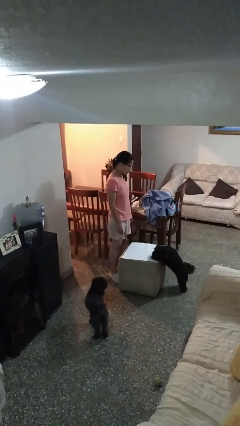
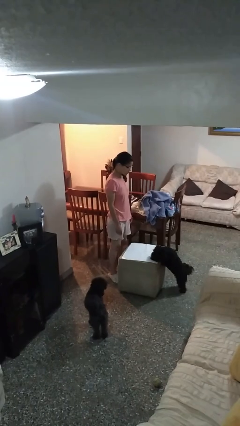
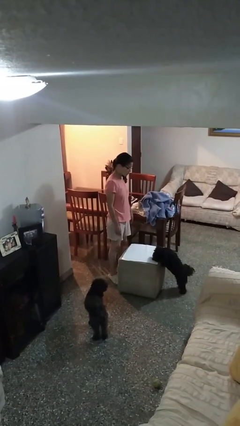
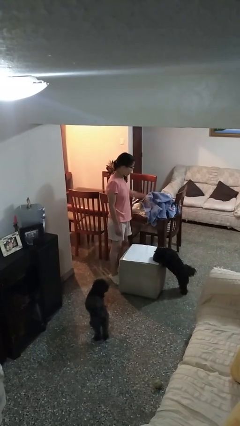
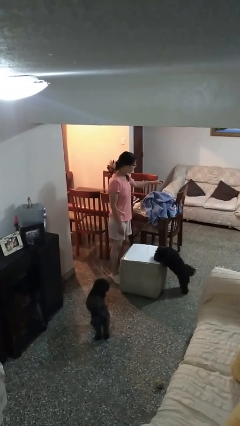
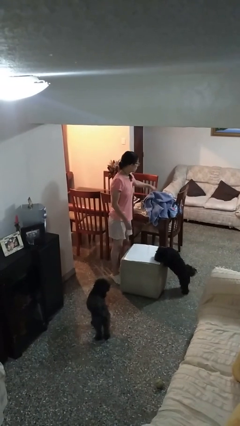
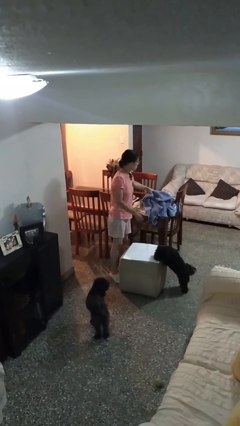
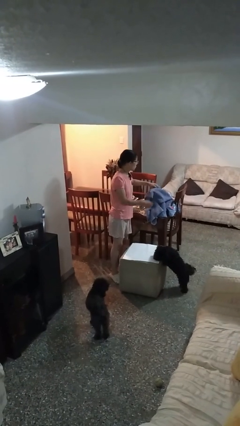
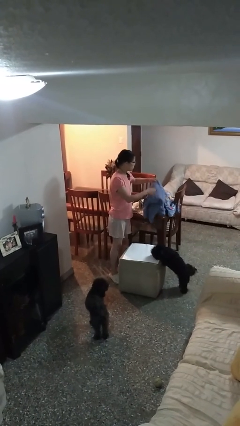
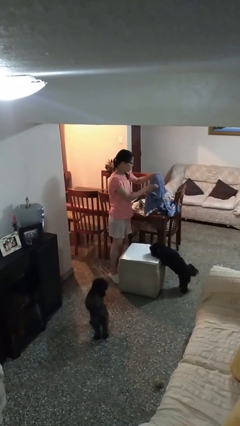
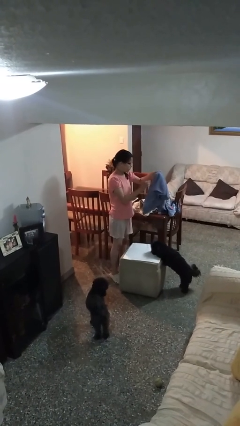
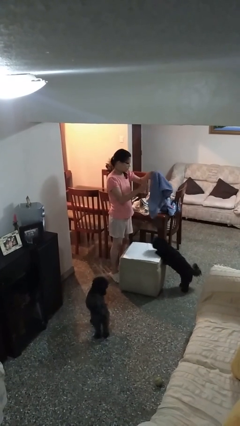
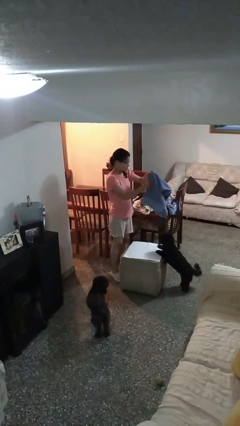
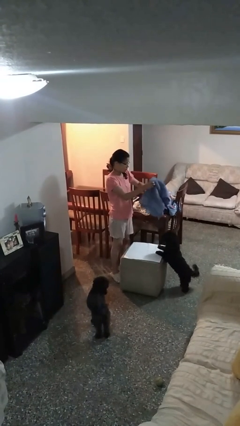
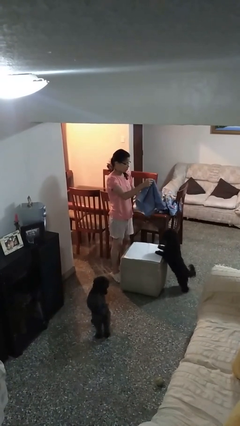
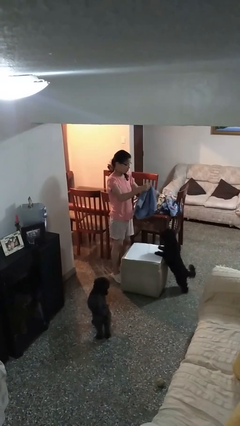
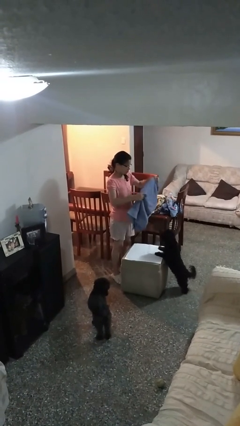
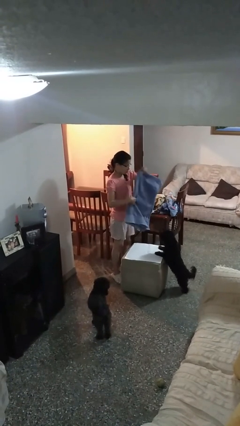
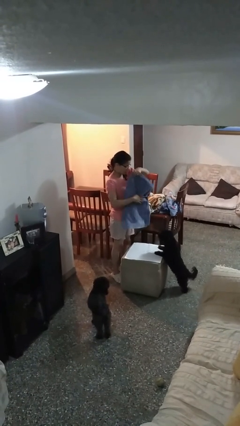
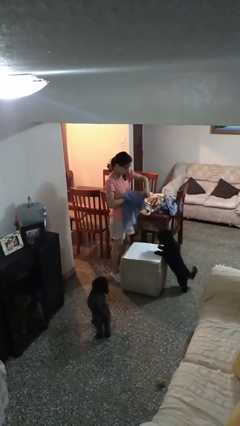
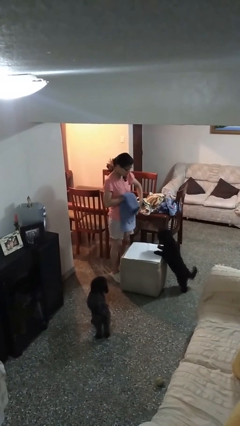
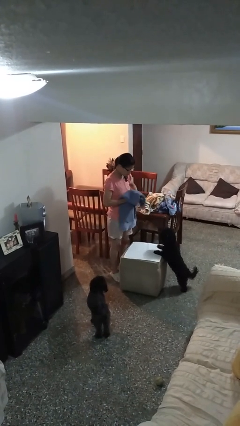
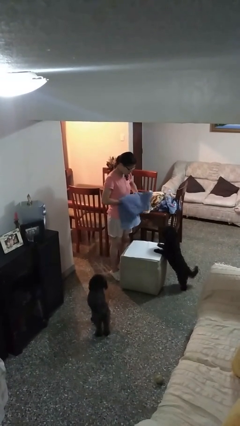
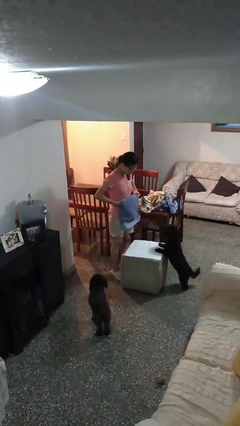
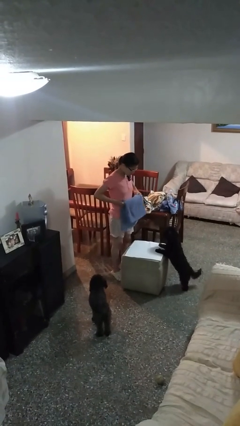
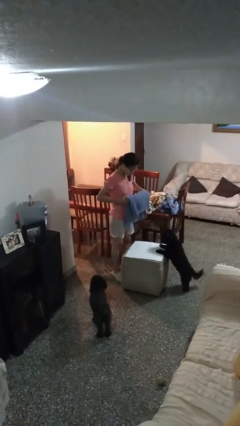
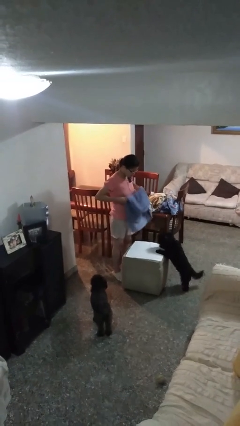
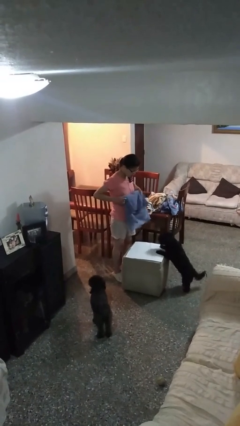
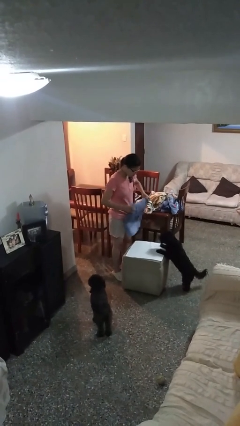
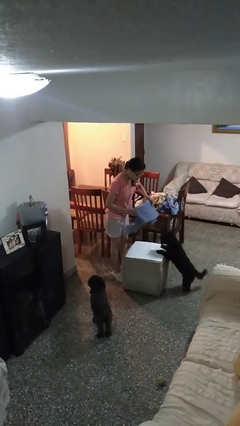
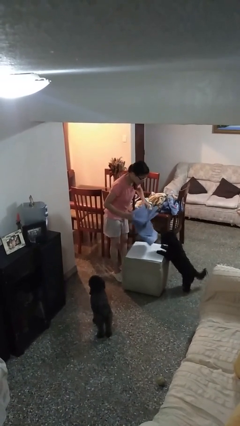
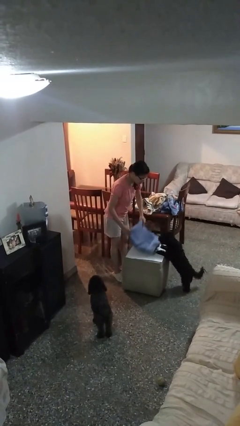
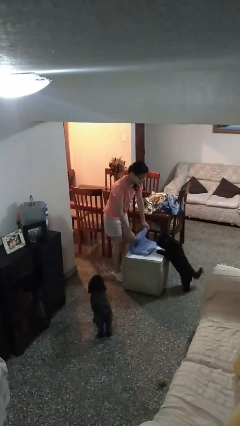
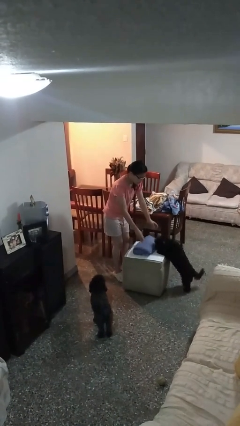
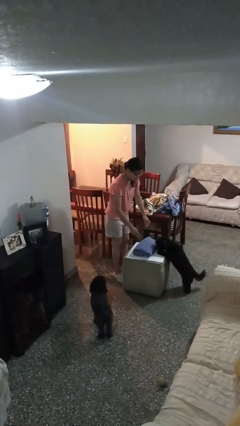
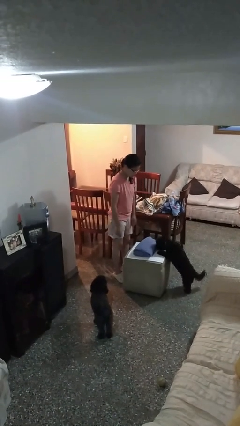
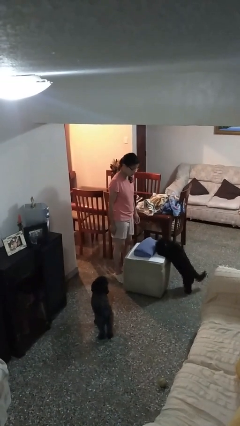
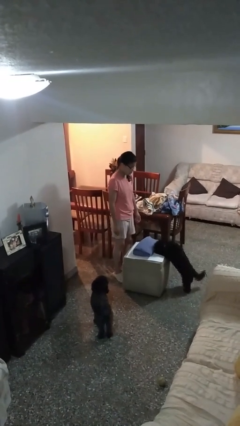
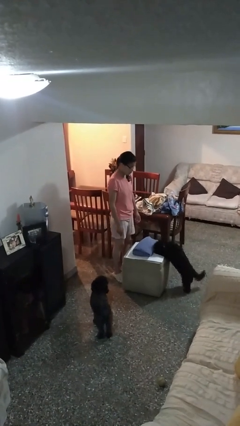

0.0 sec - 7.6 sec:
person folds towel

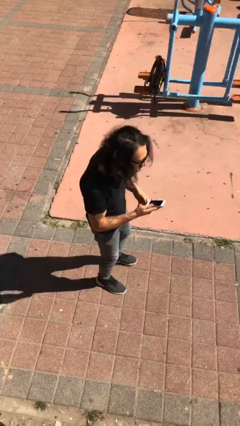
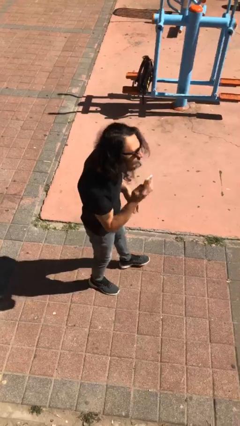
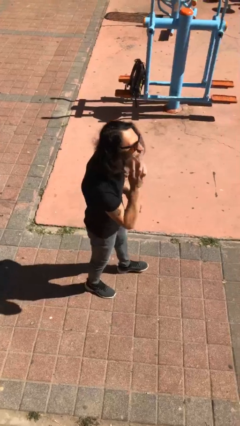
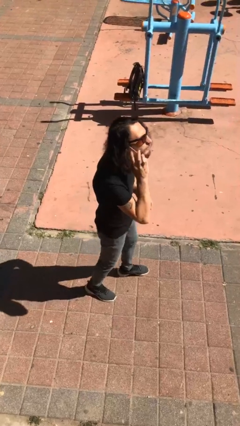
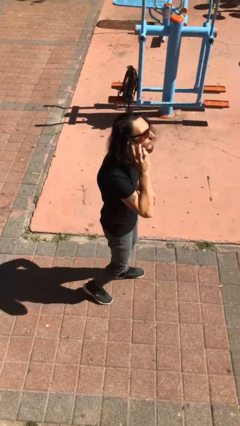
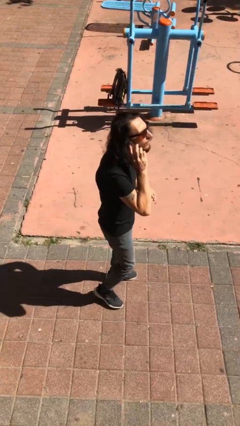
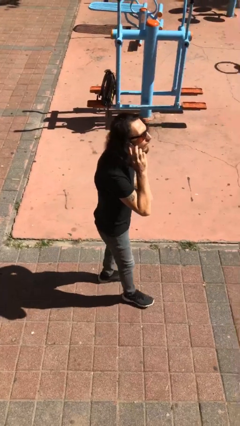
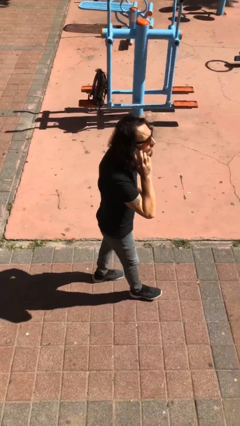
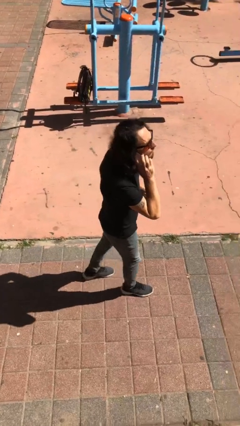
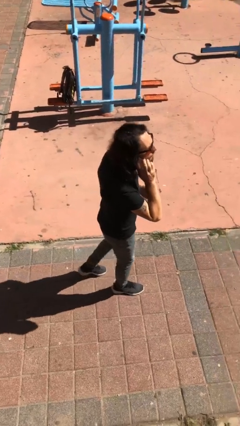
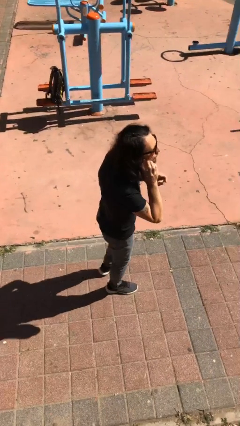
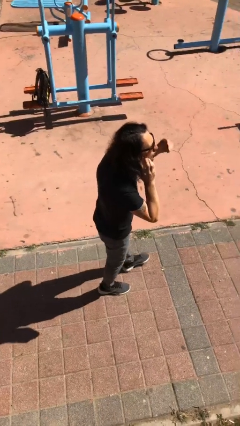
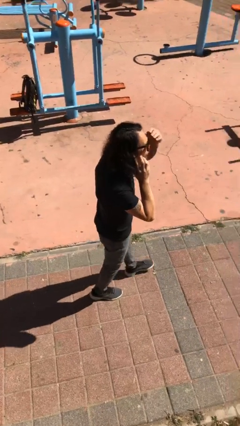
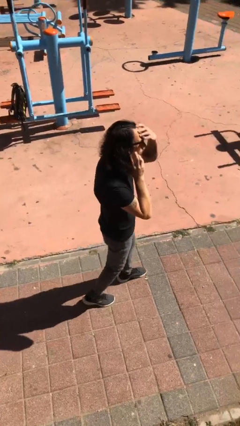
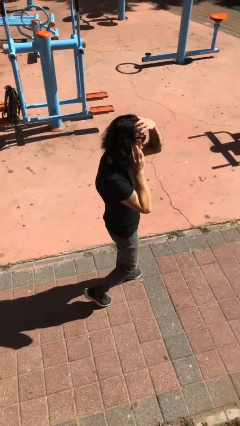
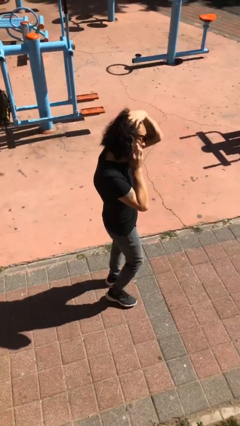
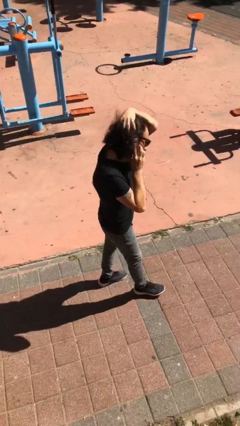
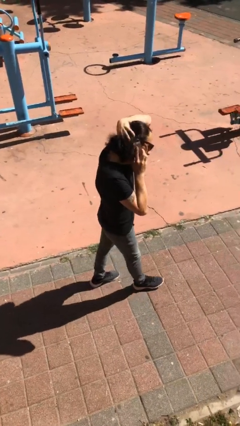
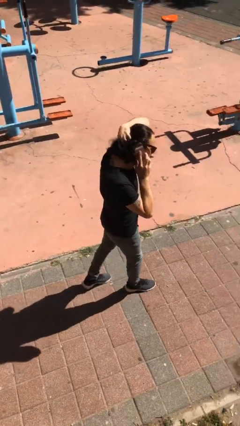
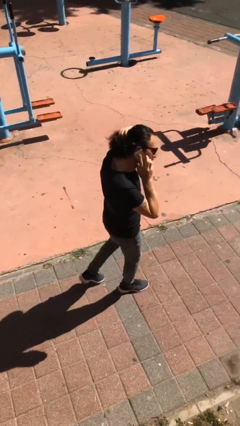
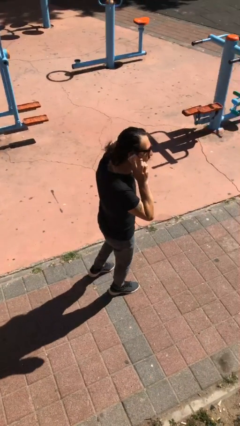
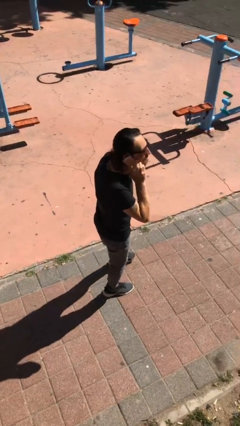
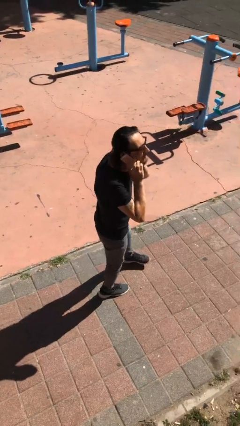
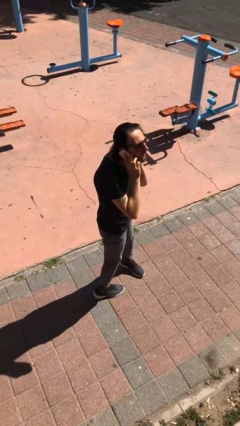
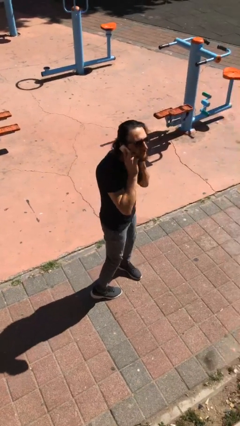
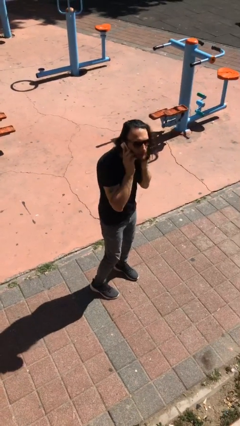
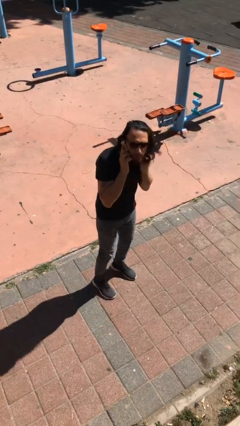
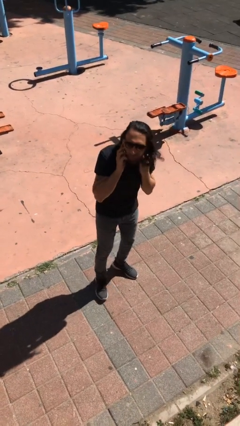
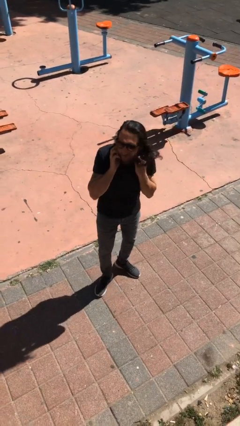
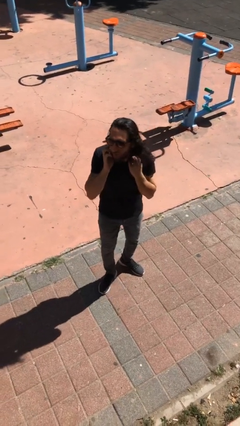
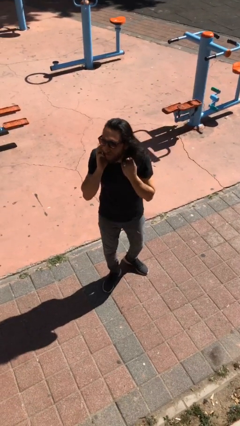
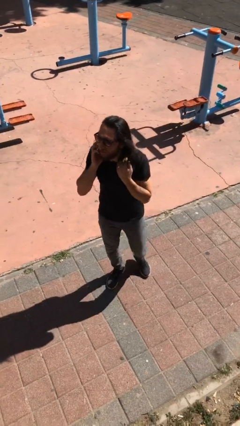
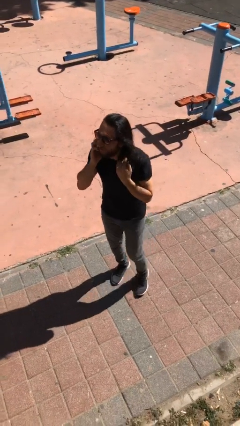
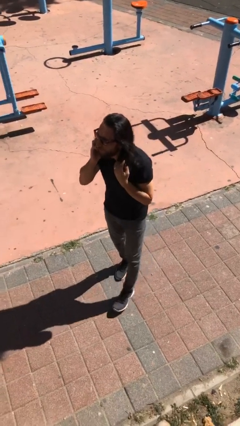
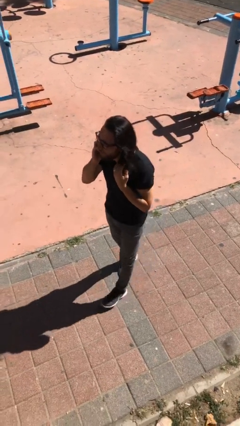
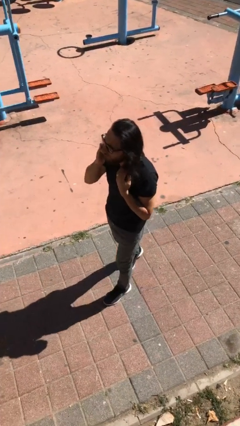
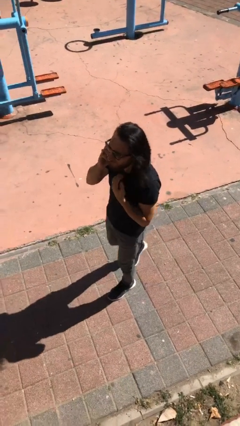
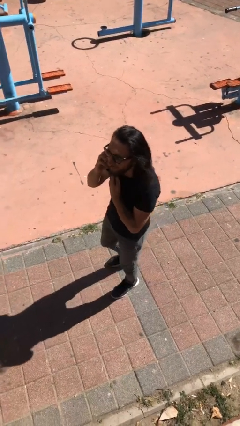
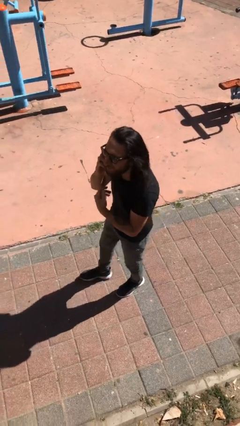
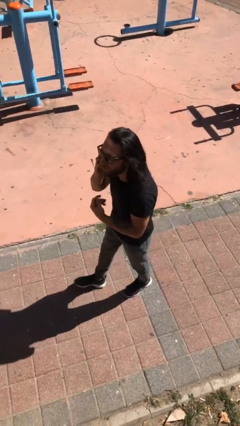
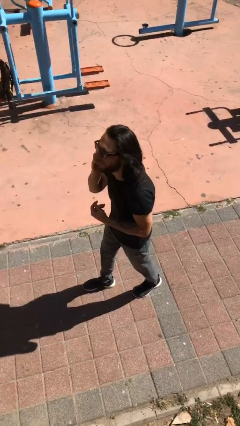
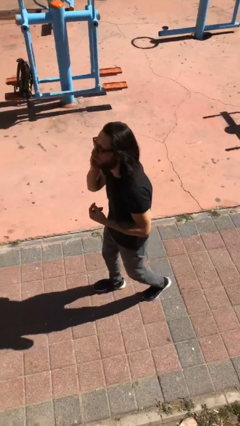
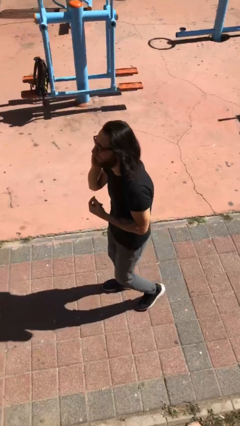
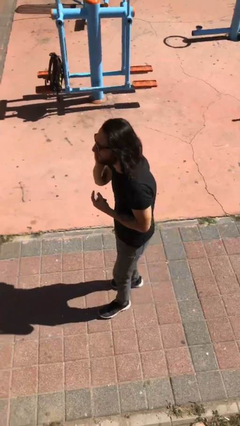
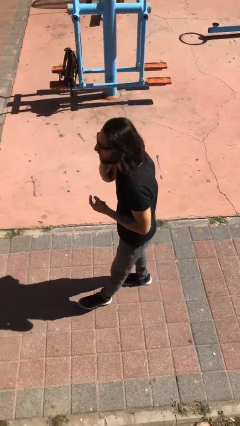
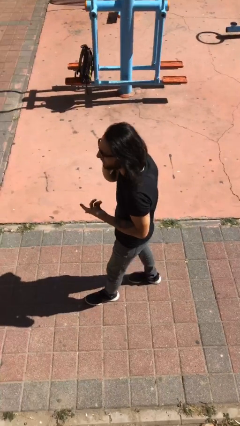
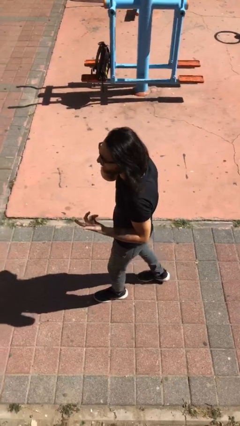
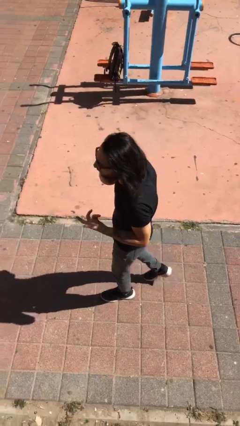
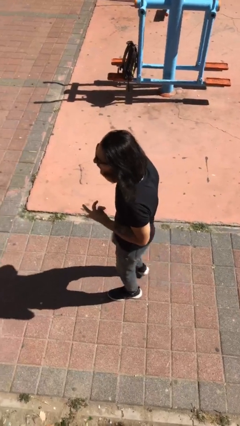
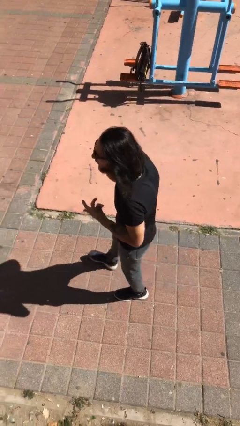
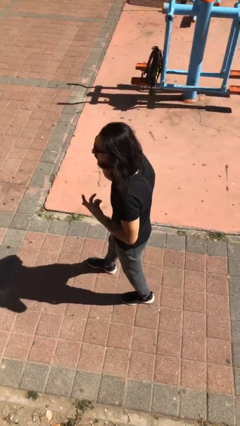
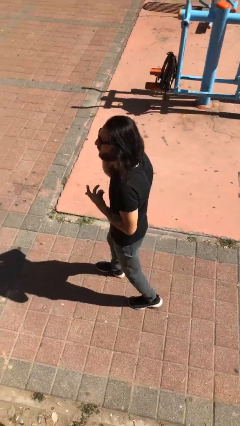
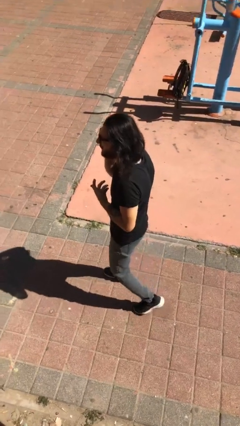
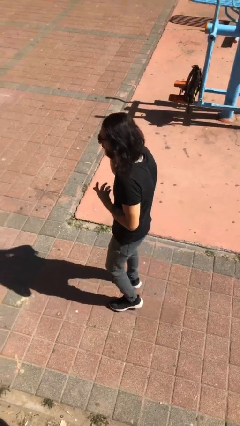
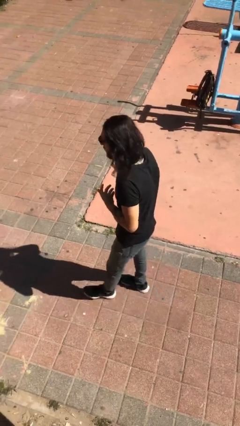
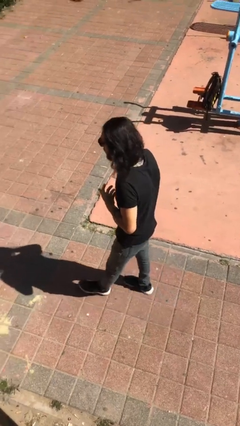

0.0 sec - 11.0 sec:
person talks on phone
